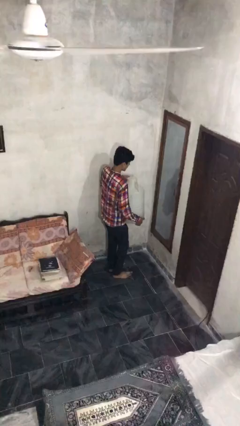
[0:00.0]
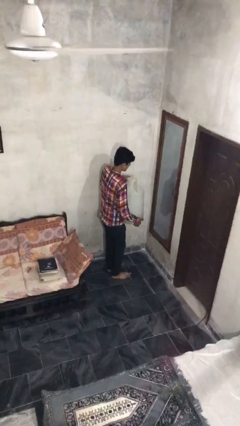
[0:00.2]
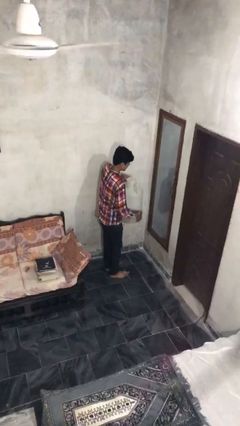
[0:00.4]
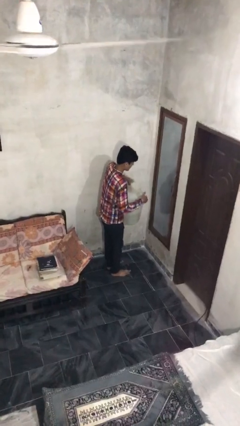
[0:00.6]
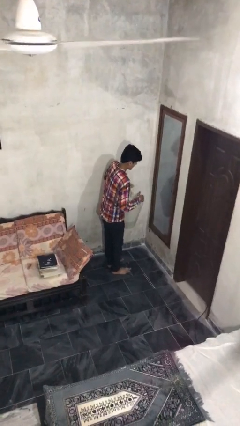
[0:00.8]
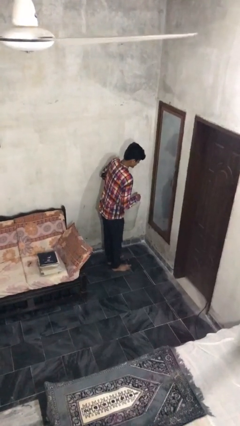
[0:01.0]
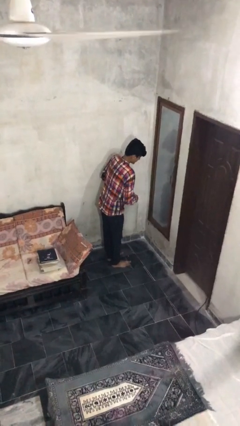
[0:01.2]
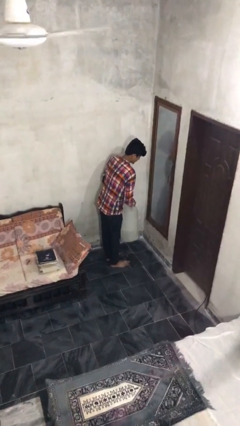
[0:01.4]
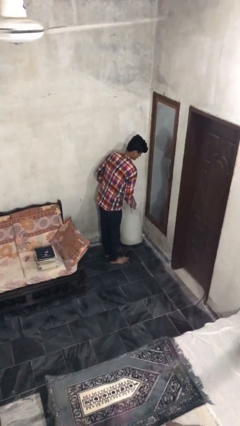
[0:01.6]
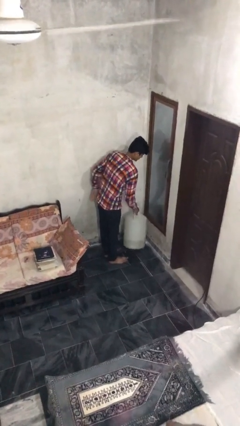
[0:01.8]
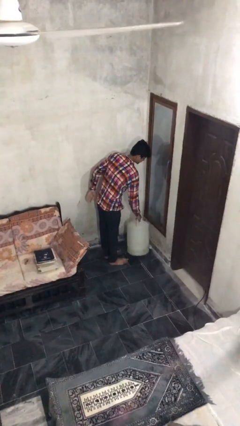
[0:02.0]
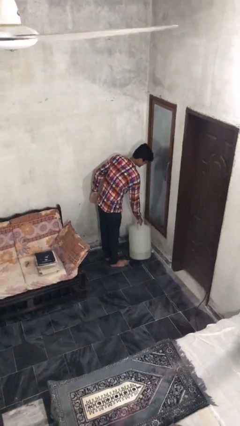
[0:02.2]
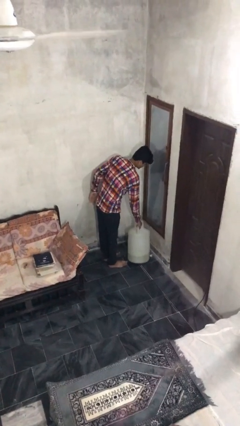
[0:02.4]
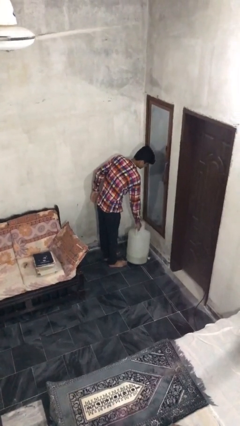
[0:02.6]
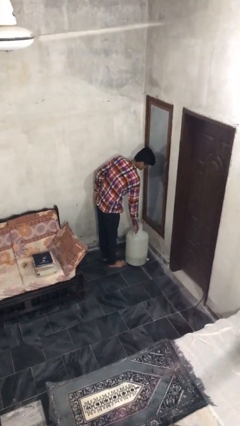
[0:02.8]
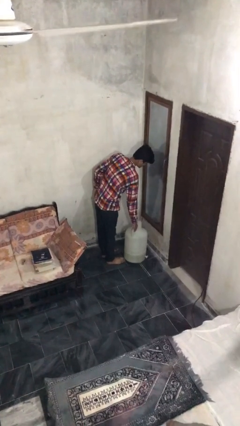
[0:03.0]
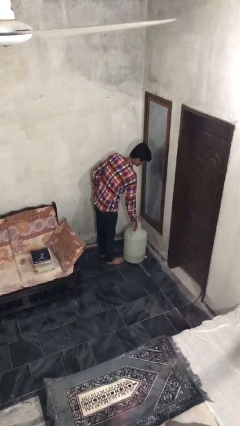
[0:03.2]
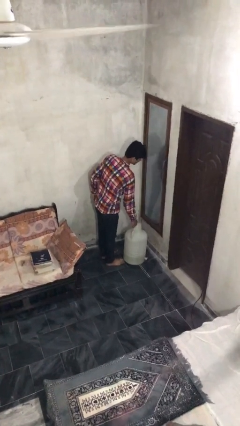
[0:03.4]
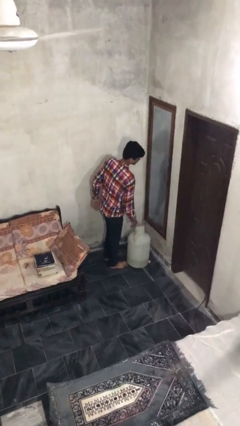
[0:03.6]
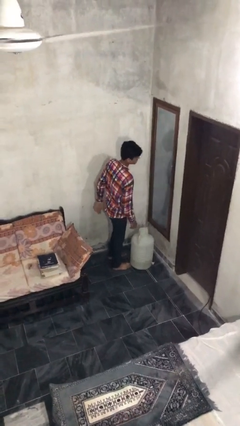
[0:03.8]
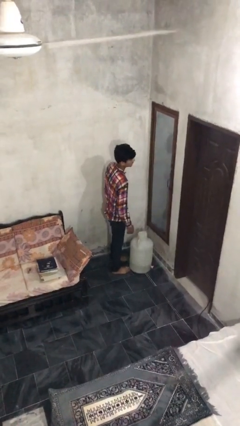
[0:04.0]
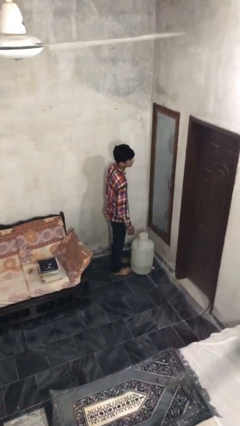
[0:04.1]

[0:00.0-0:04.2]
person puts down object on floor

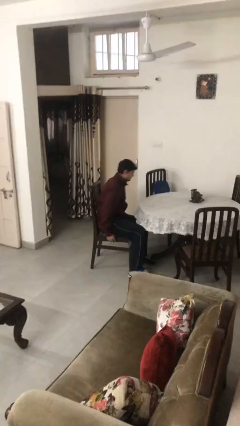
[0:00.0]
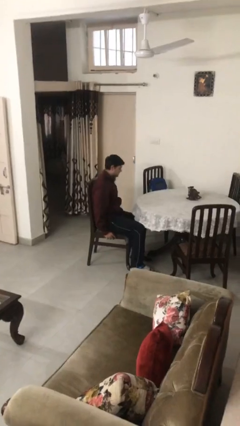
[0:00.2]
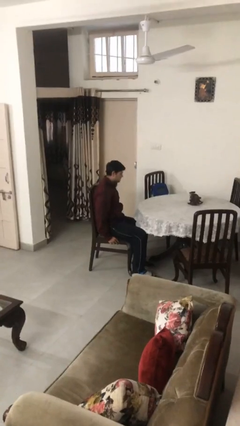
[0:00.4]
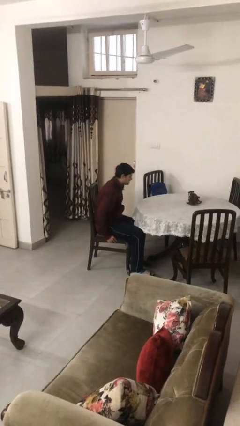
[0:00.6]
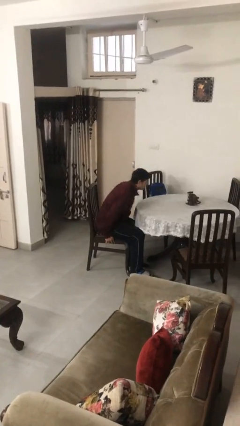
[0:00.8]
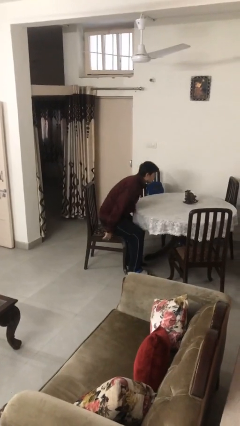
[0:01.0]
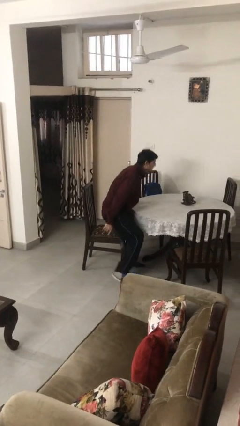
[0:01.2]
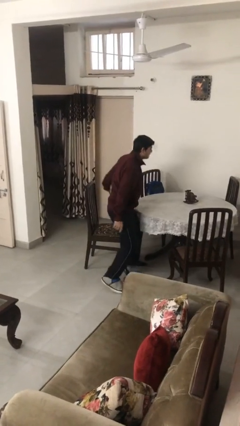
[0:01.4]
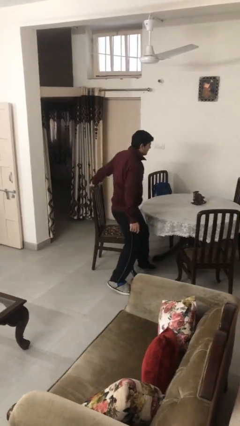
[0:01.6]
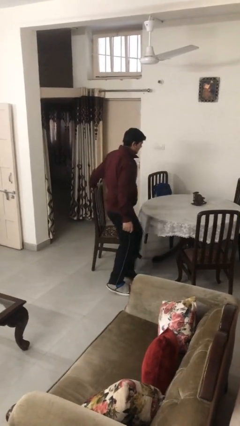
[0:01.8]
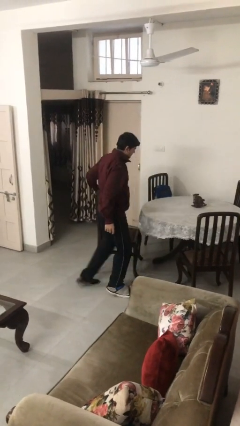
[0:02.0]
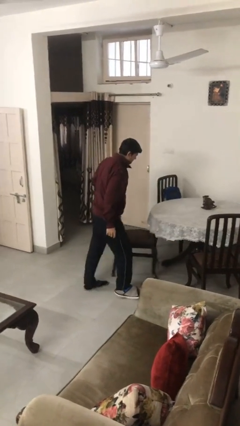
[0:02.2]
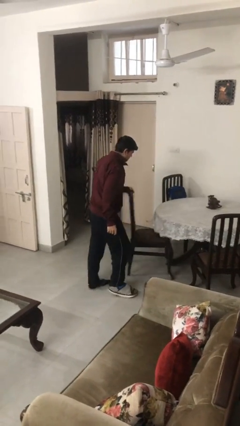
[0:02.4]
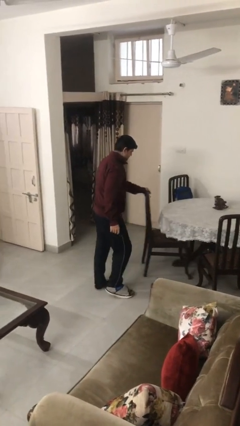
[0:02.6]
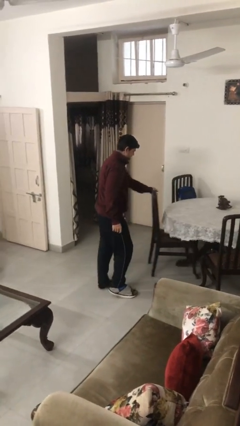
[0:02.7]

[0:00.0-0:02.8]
person stands up

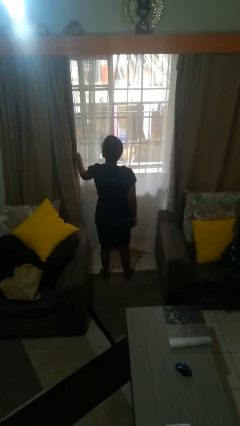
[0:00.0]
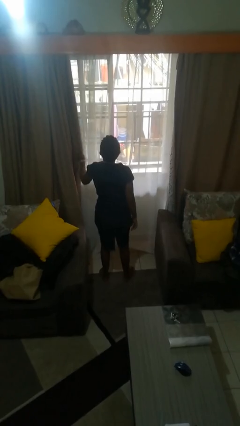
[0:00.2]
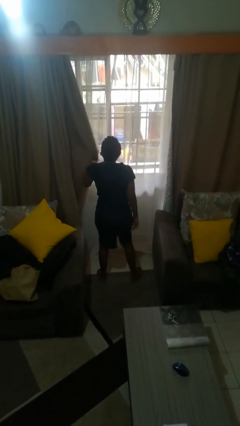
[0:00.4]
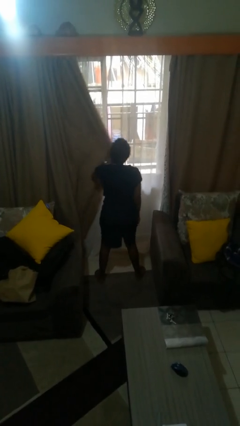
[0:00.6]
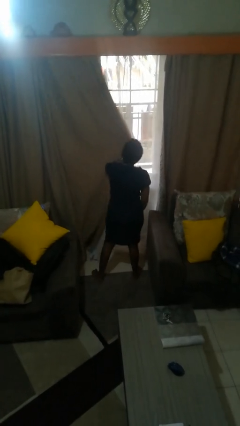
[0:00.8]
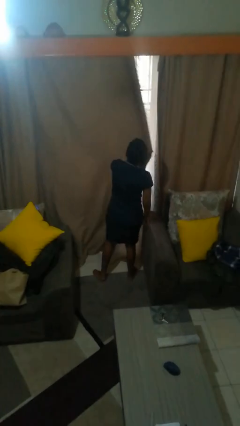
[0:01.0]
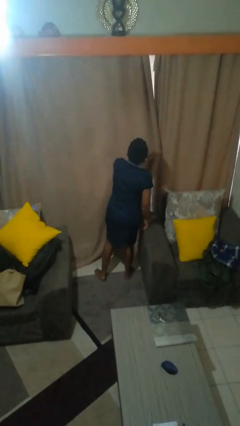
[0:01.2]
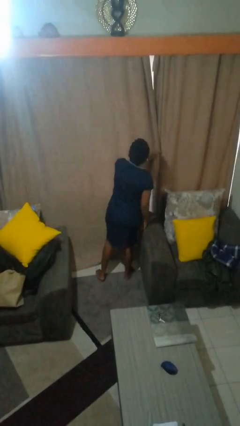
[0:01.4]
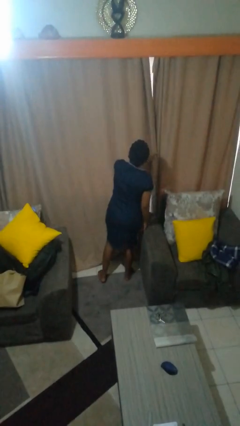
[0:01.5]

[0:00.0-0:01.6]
person closes curtains

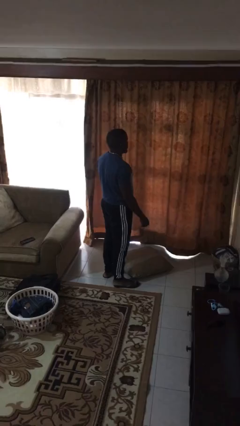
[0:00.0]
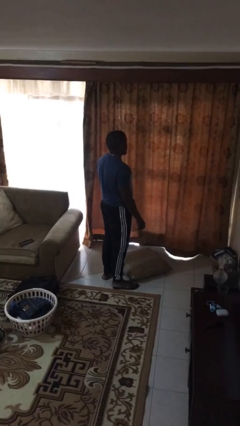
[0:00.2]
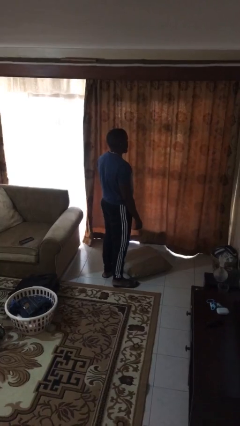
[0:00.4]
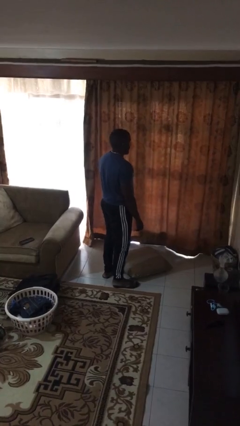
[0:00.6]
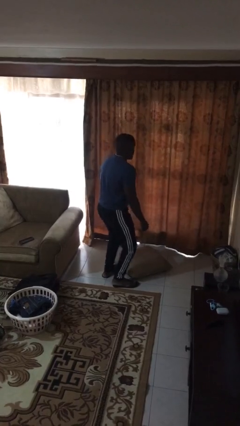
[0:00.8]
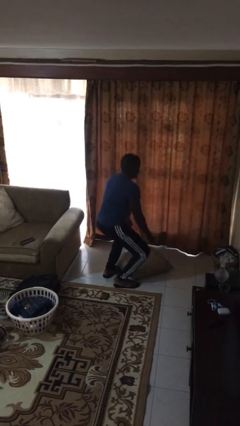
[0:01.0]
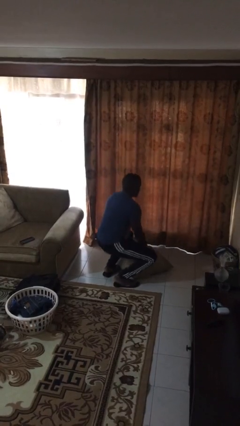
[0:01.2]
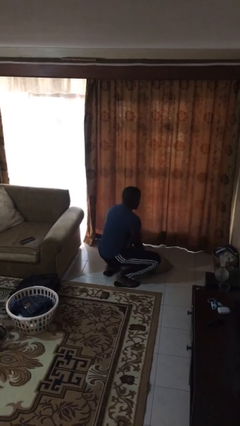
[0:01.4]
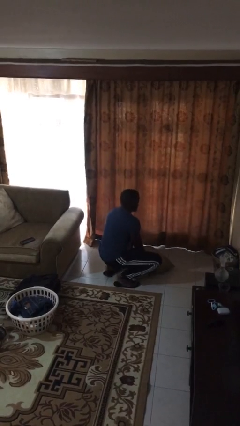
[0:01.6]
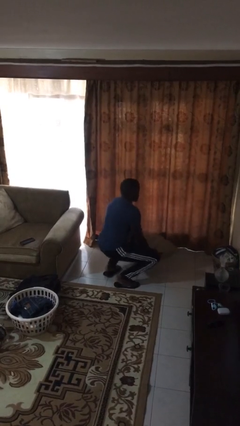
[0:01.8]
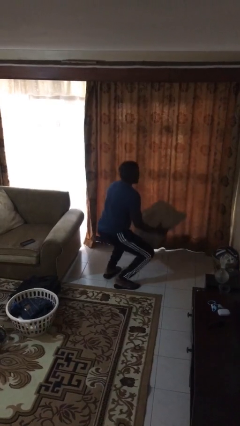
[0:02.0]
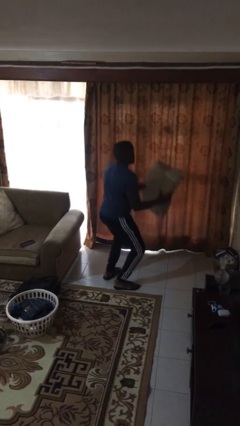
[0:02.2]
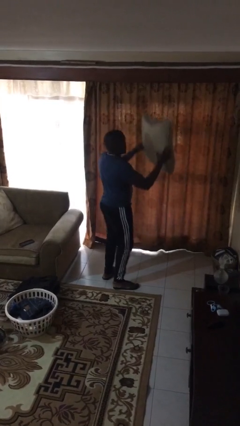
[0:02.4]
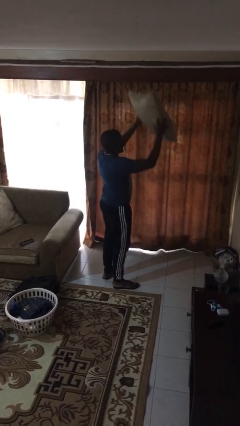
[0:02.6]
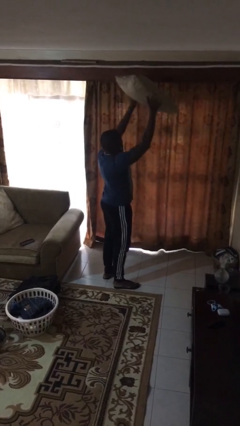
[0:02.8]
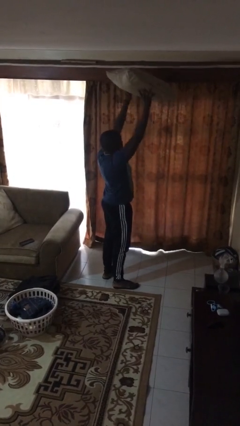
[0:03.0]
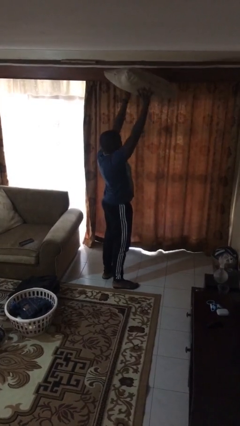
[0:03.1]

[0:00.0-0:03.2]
person picks up object from floor

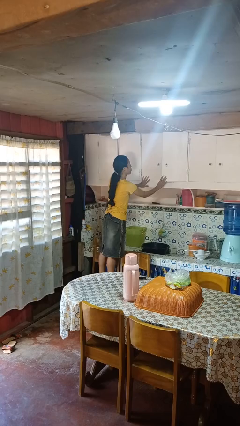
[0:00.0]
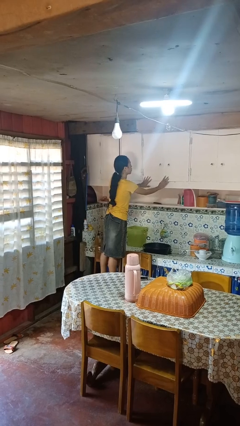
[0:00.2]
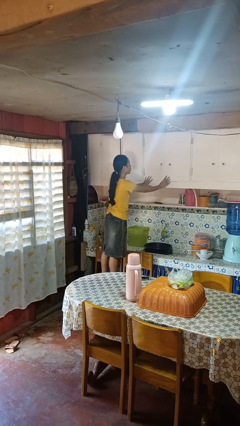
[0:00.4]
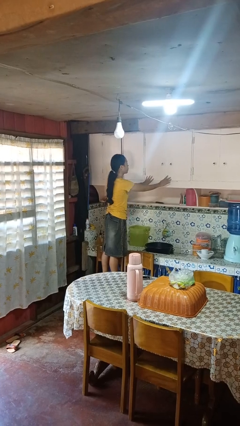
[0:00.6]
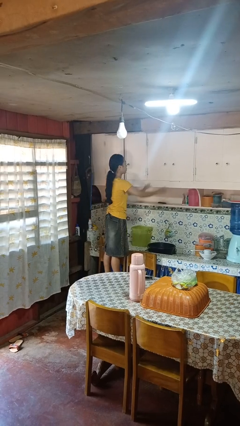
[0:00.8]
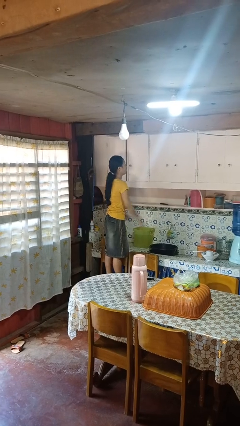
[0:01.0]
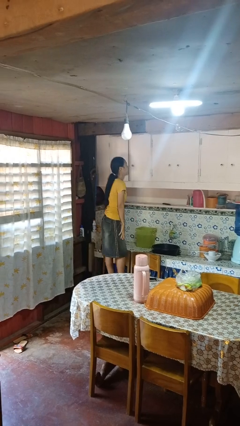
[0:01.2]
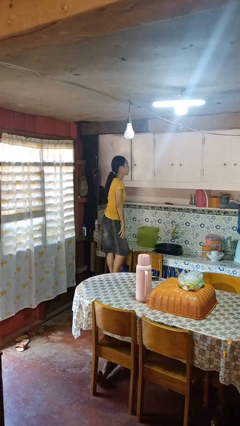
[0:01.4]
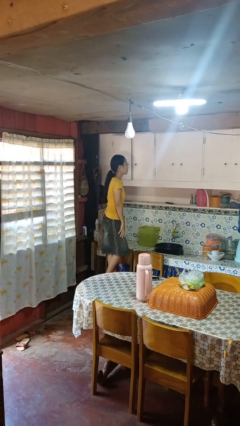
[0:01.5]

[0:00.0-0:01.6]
person closes cabinet

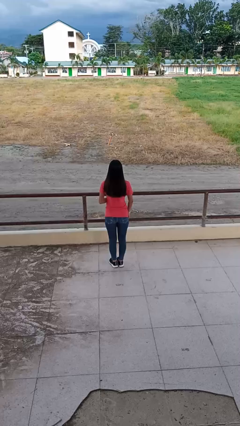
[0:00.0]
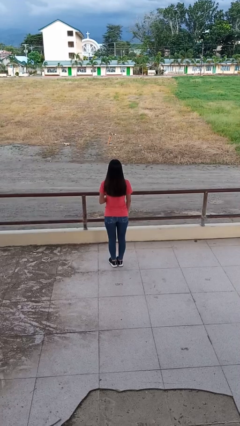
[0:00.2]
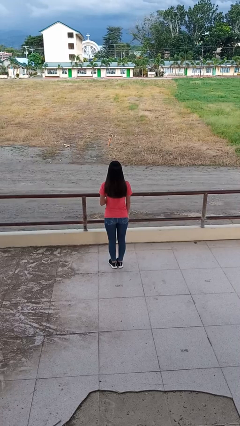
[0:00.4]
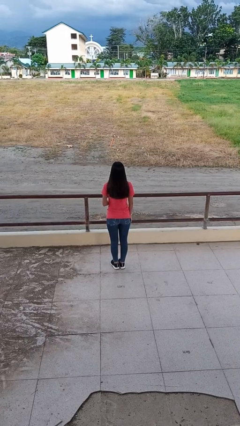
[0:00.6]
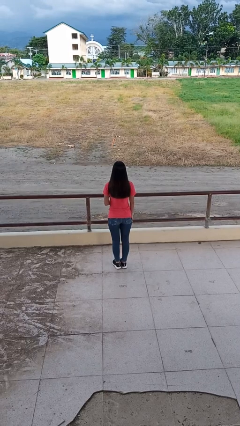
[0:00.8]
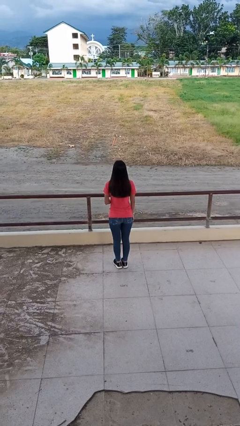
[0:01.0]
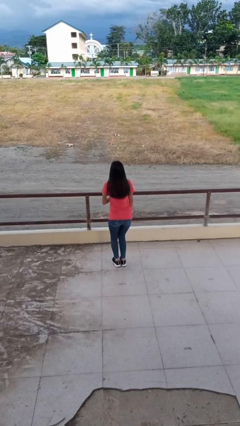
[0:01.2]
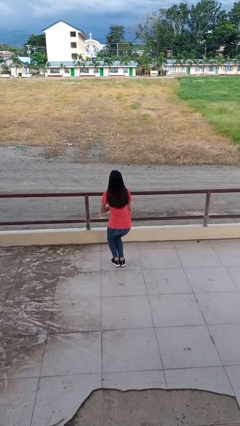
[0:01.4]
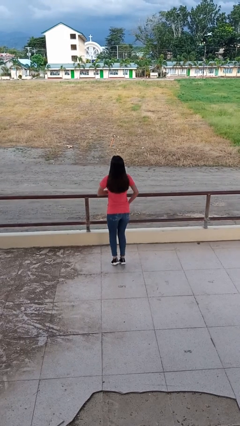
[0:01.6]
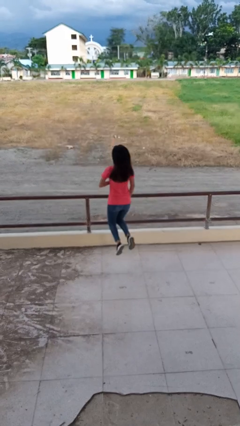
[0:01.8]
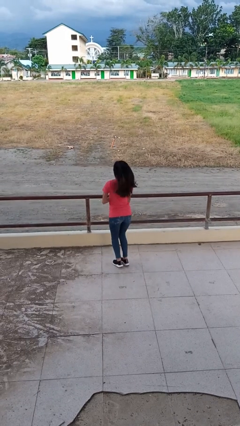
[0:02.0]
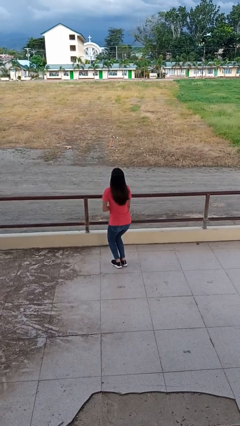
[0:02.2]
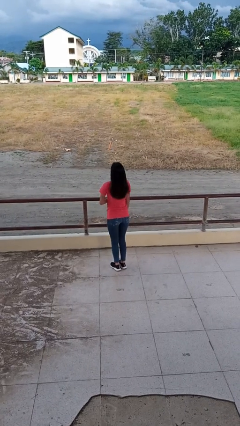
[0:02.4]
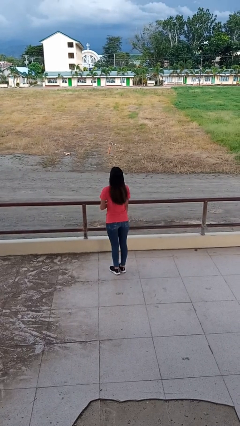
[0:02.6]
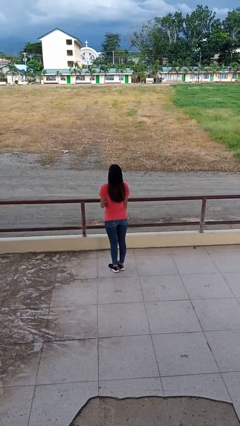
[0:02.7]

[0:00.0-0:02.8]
person jumps

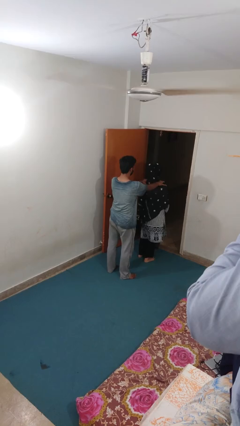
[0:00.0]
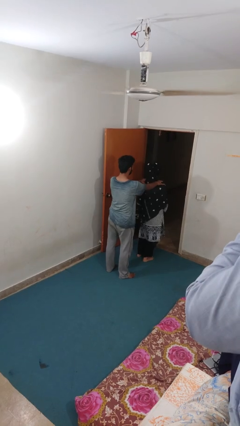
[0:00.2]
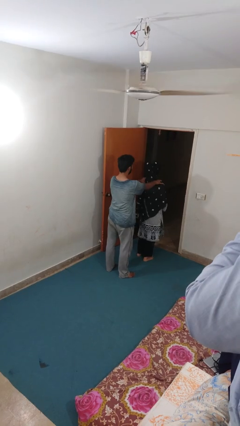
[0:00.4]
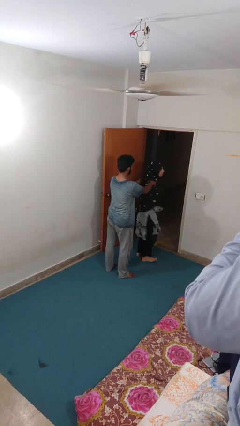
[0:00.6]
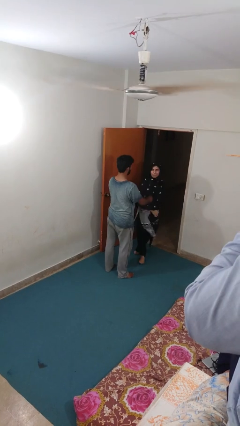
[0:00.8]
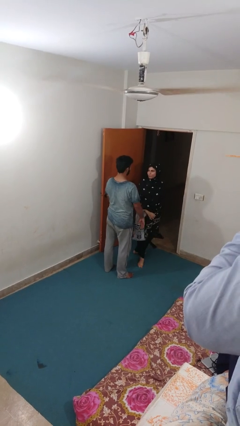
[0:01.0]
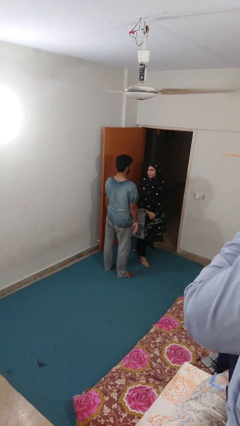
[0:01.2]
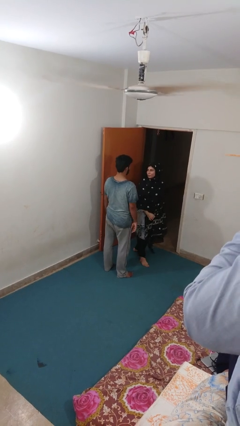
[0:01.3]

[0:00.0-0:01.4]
person spins person around
